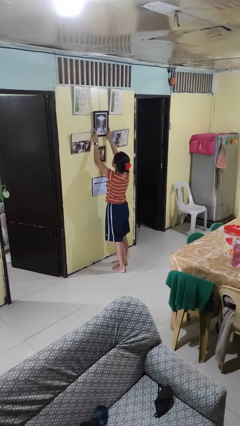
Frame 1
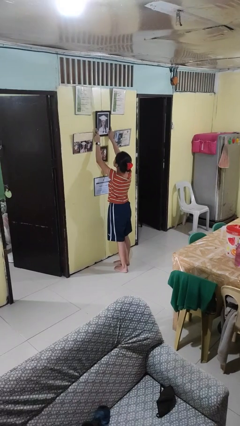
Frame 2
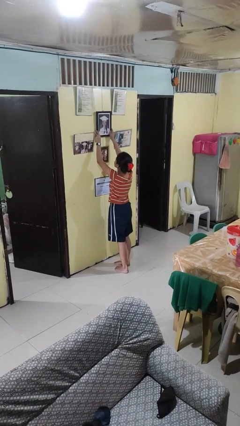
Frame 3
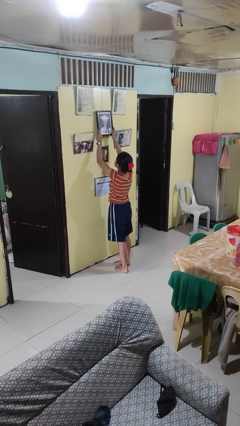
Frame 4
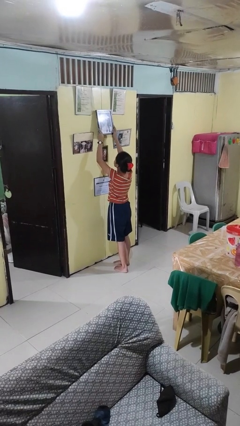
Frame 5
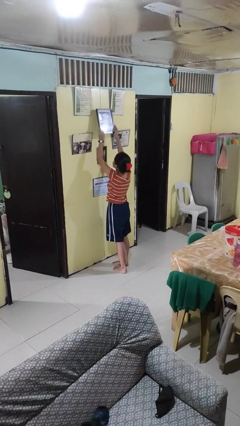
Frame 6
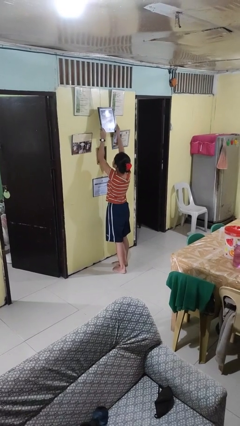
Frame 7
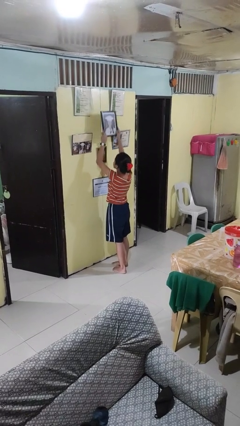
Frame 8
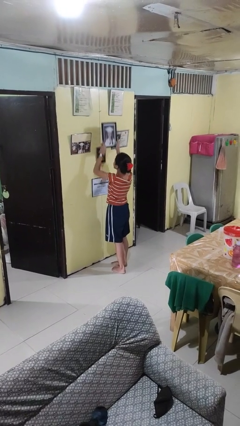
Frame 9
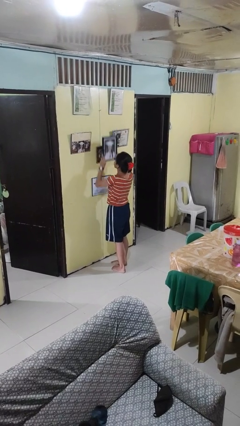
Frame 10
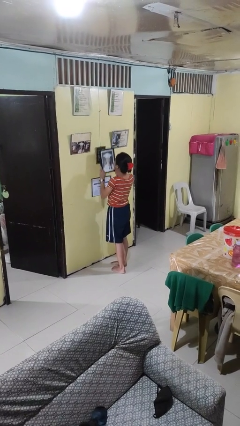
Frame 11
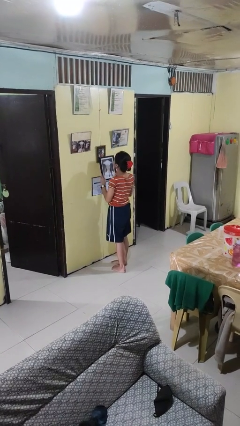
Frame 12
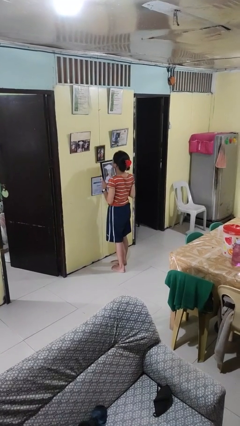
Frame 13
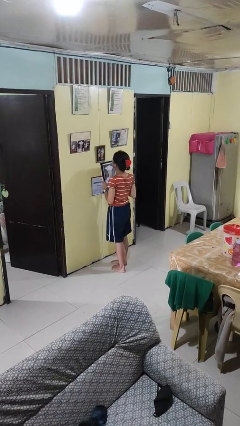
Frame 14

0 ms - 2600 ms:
person takes down picture frame

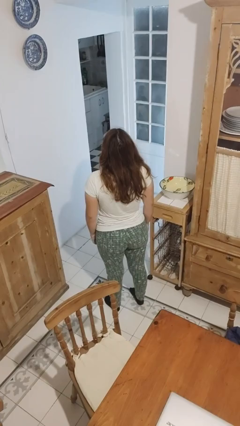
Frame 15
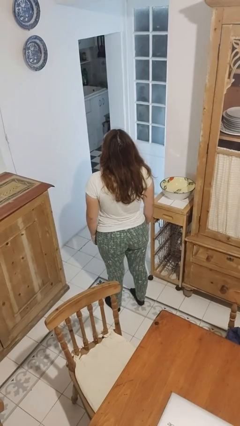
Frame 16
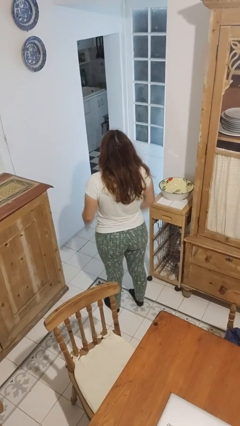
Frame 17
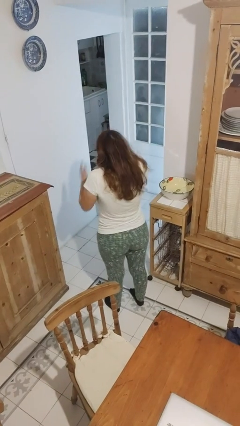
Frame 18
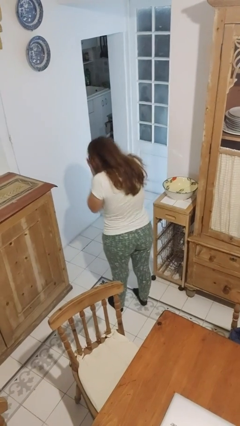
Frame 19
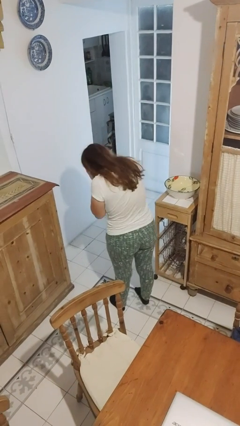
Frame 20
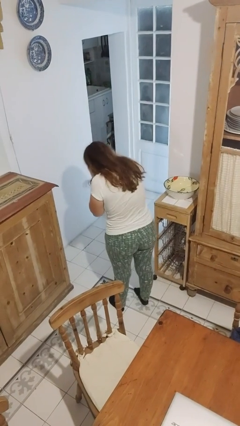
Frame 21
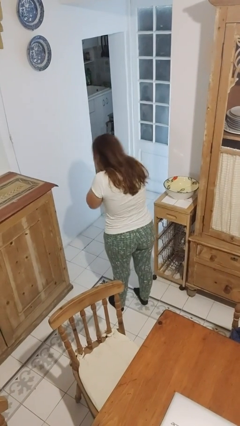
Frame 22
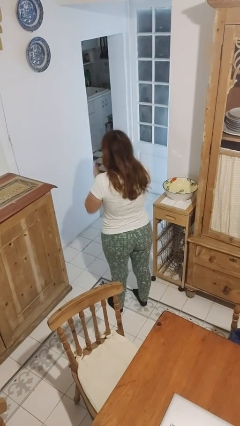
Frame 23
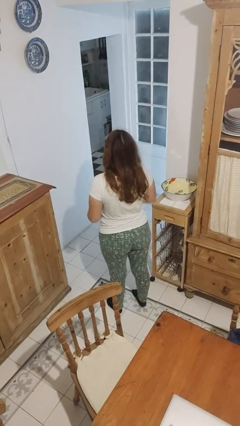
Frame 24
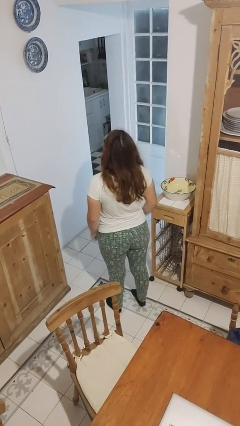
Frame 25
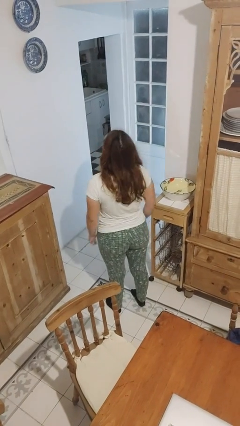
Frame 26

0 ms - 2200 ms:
person sneezes into hand

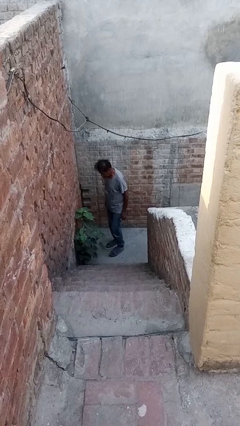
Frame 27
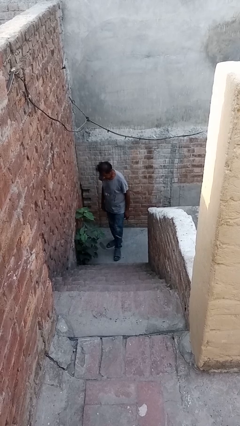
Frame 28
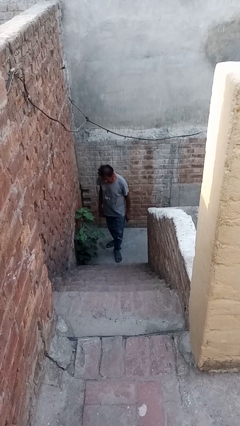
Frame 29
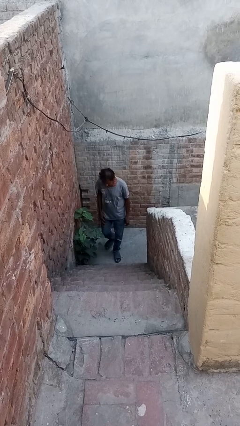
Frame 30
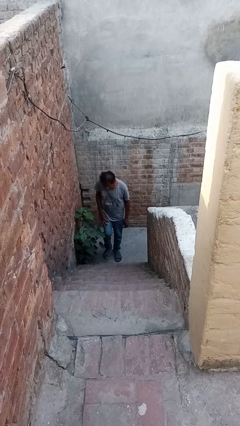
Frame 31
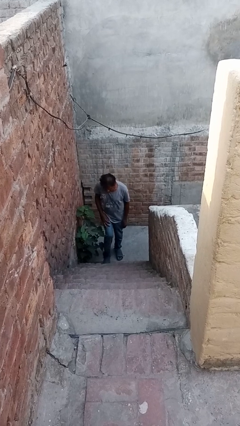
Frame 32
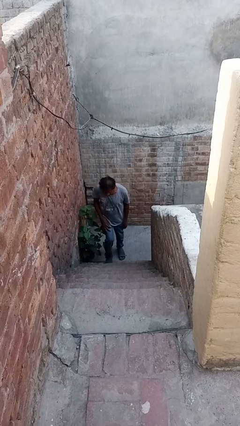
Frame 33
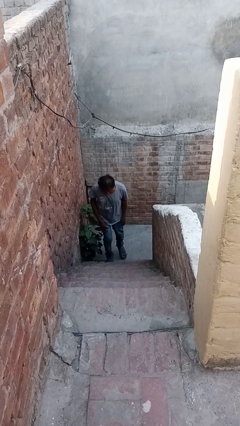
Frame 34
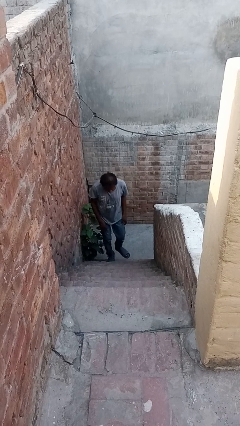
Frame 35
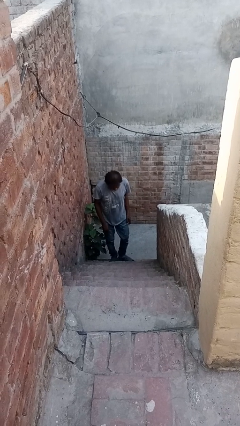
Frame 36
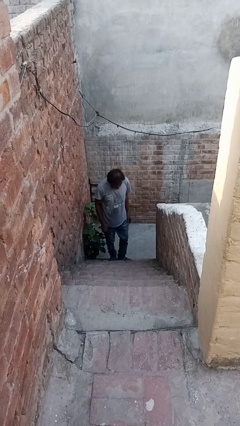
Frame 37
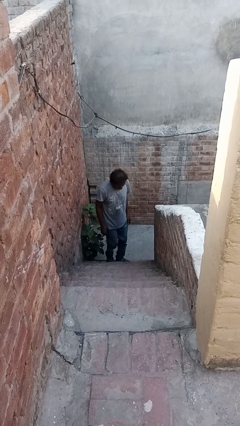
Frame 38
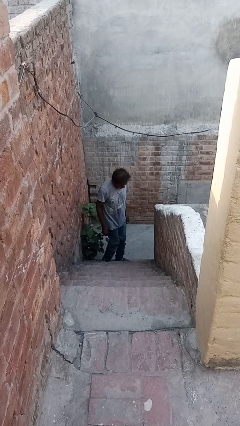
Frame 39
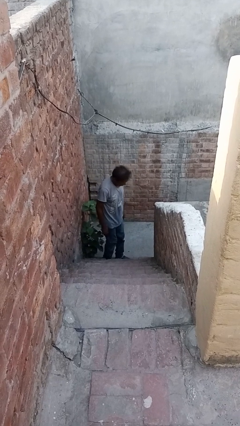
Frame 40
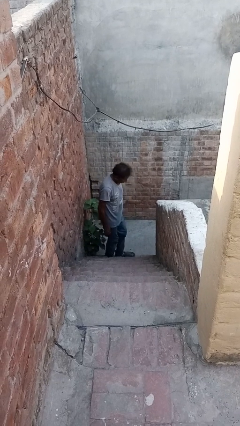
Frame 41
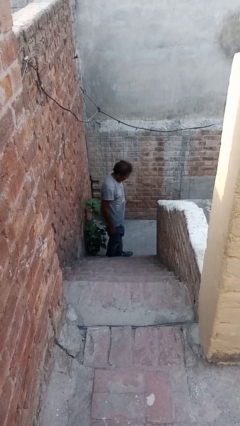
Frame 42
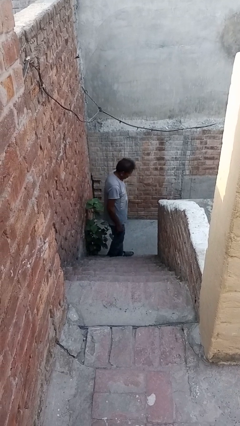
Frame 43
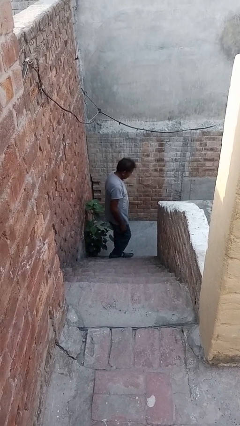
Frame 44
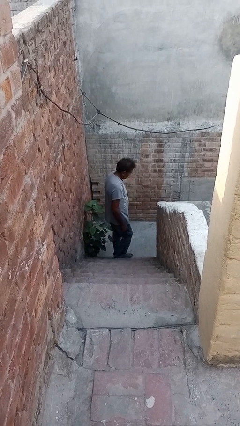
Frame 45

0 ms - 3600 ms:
person climbs up stairs

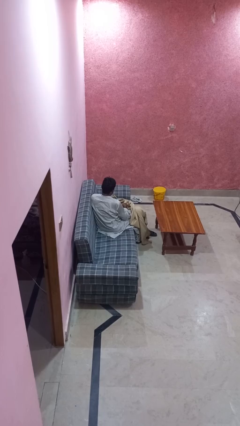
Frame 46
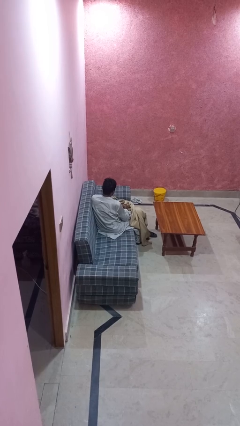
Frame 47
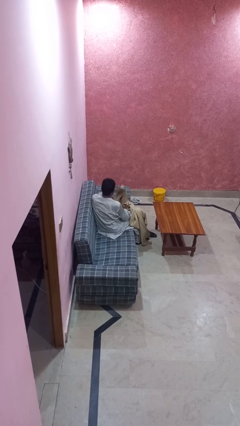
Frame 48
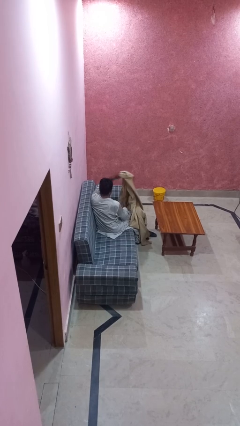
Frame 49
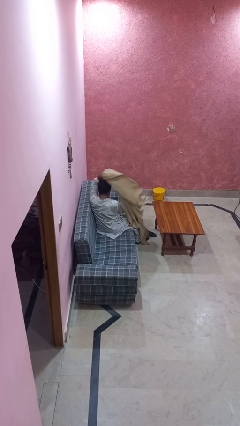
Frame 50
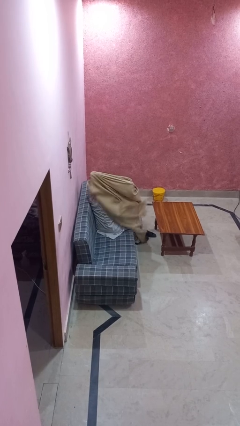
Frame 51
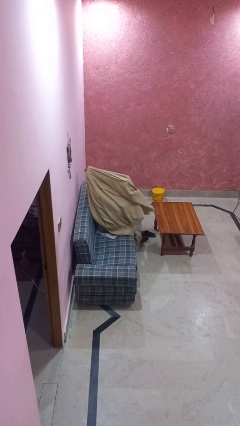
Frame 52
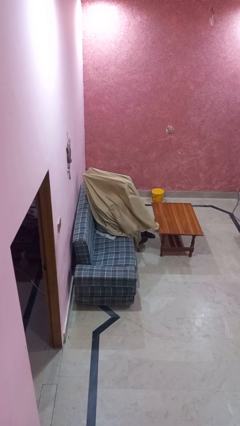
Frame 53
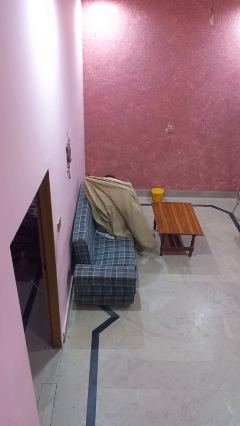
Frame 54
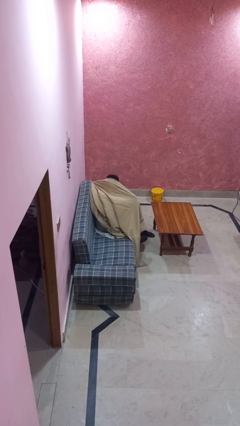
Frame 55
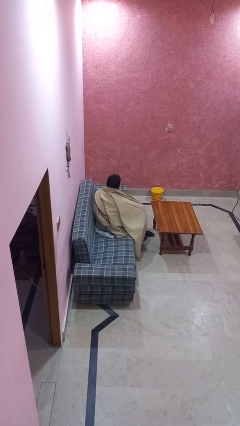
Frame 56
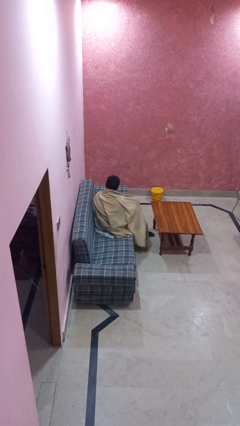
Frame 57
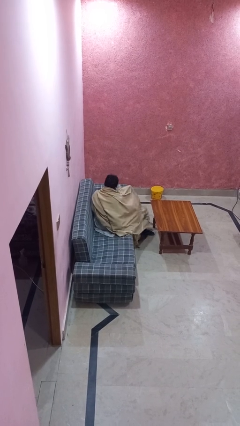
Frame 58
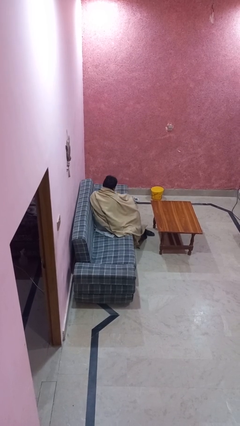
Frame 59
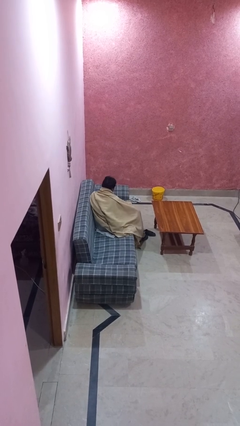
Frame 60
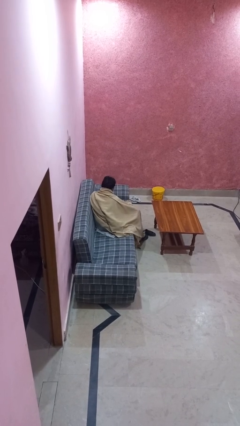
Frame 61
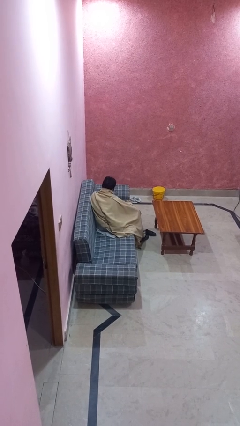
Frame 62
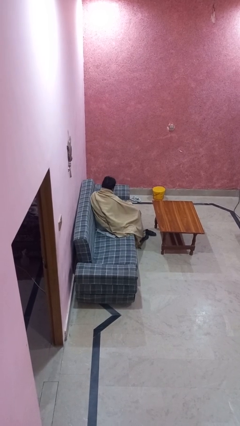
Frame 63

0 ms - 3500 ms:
person covers with blanket

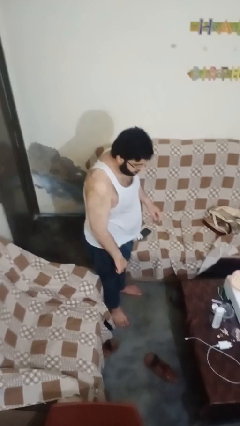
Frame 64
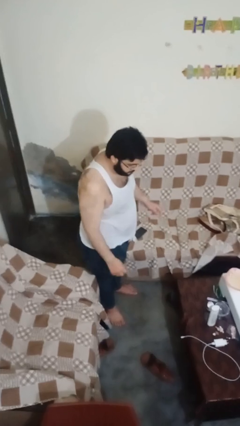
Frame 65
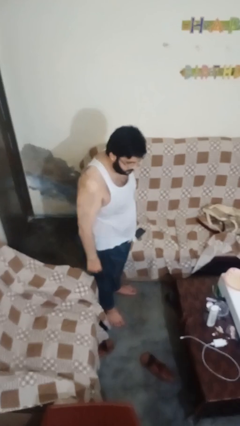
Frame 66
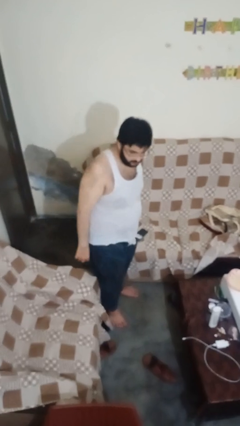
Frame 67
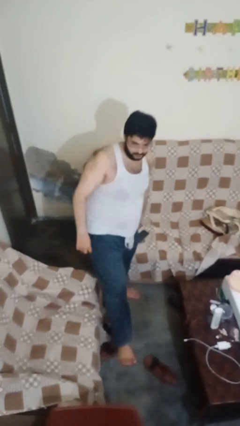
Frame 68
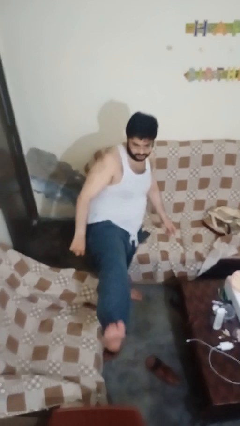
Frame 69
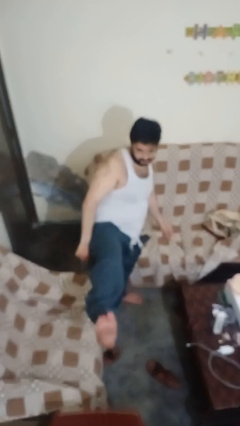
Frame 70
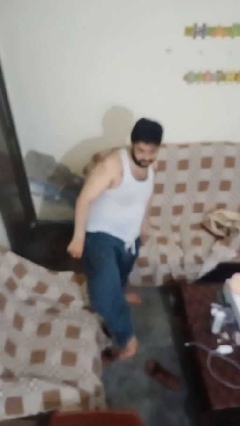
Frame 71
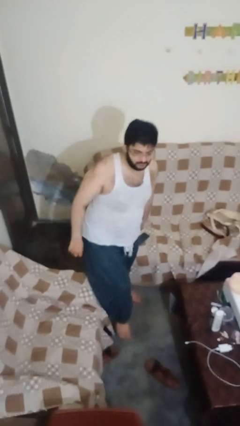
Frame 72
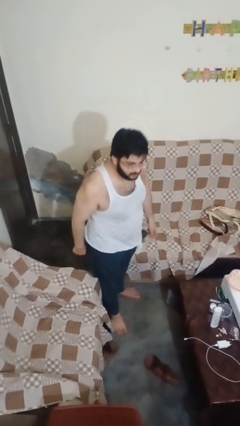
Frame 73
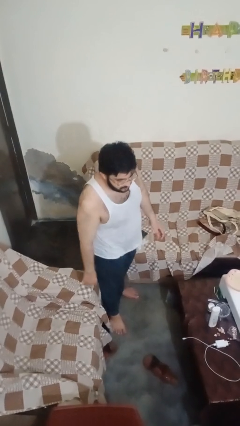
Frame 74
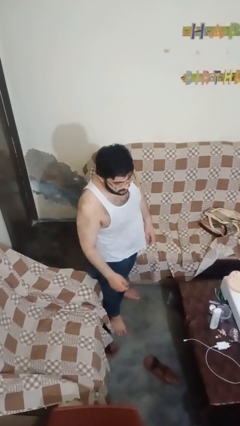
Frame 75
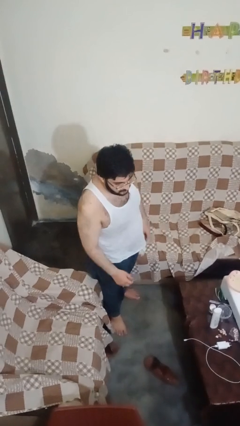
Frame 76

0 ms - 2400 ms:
person karate kicks

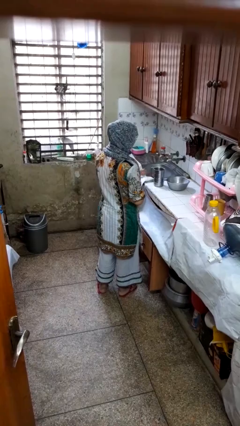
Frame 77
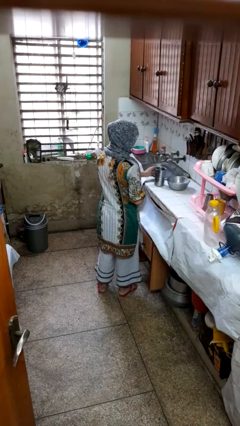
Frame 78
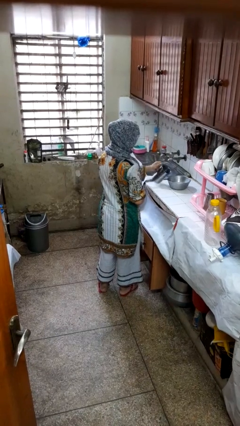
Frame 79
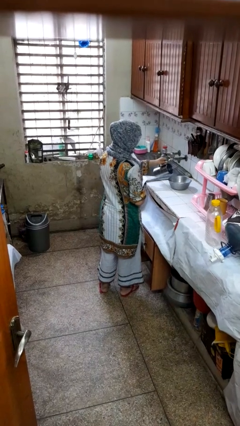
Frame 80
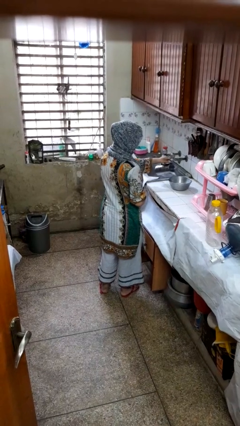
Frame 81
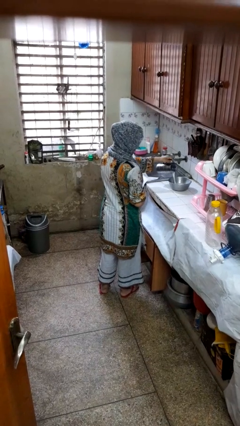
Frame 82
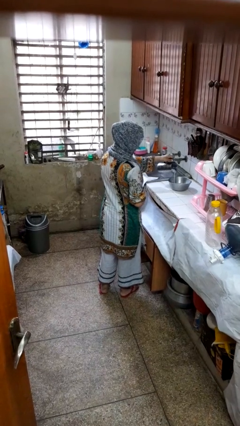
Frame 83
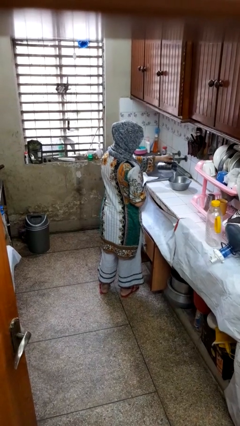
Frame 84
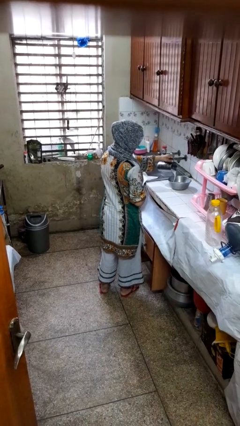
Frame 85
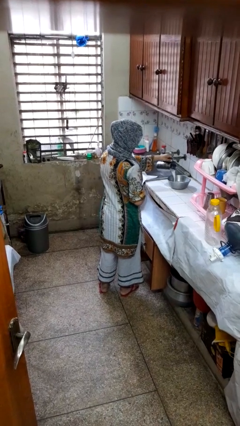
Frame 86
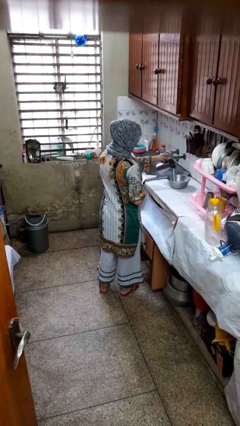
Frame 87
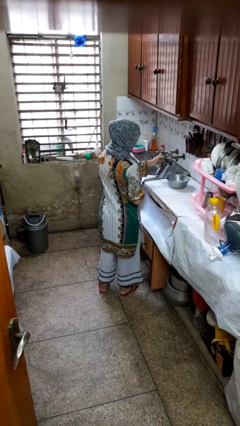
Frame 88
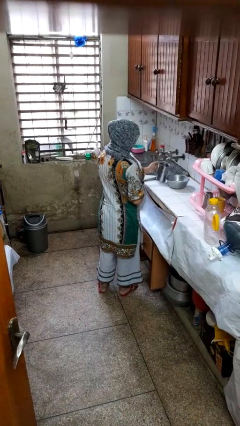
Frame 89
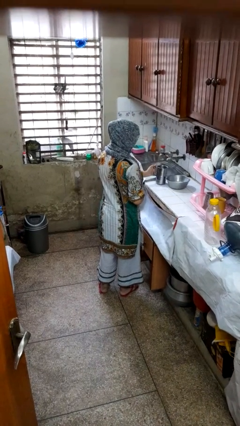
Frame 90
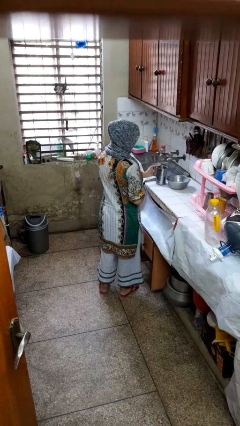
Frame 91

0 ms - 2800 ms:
person pours into bowl

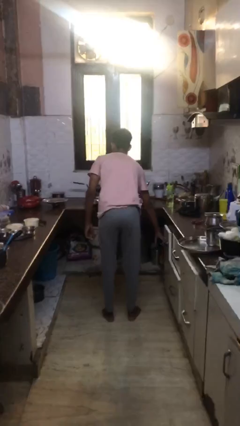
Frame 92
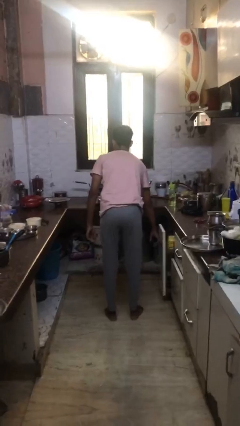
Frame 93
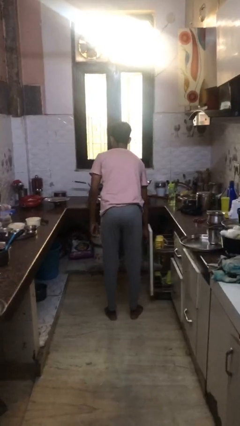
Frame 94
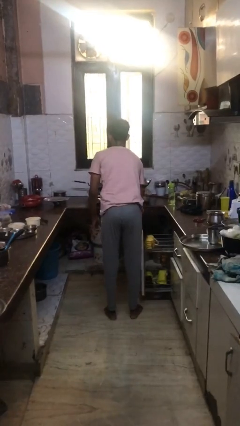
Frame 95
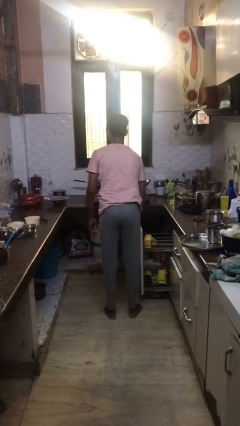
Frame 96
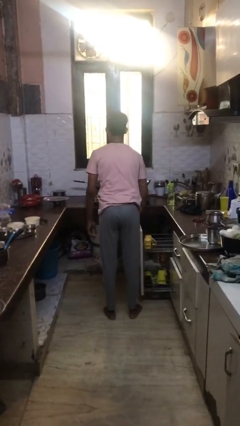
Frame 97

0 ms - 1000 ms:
person opens dishwasher
